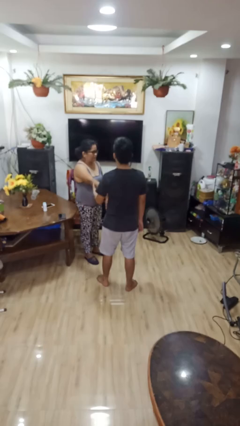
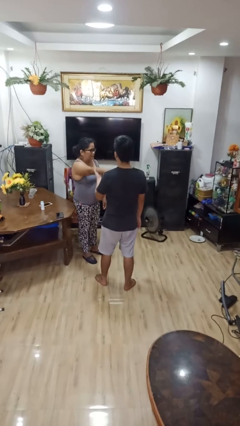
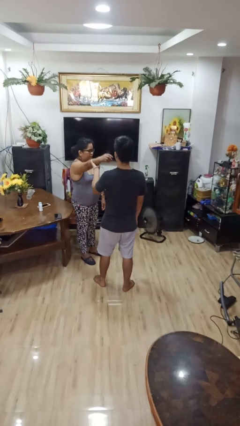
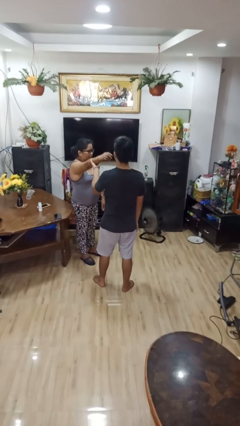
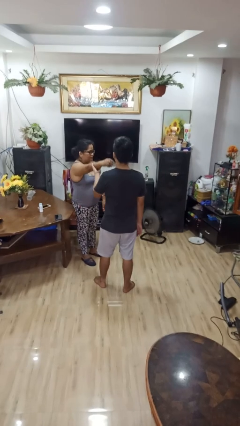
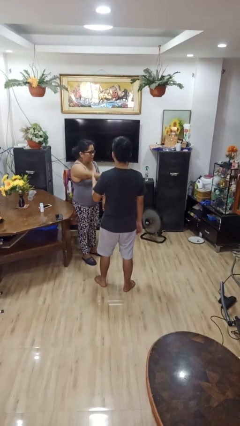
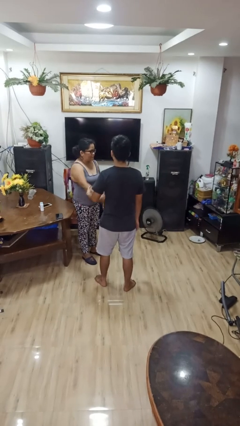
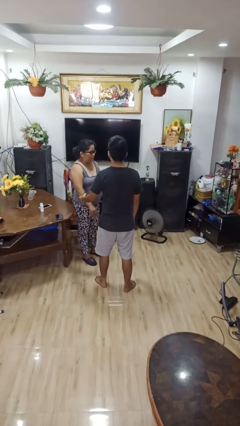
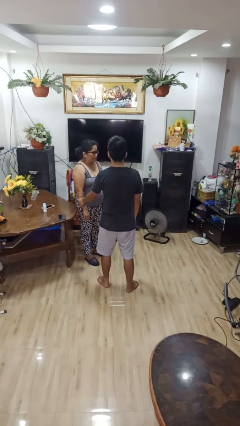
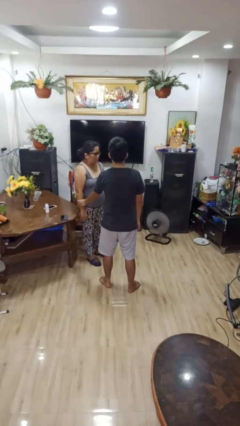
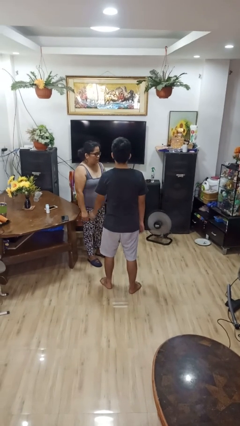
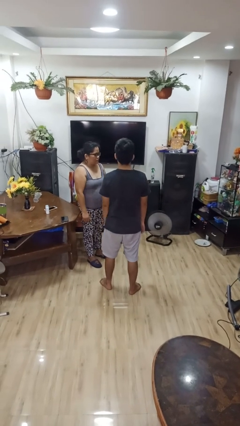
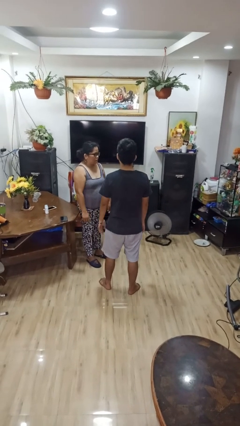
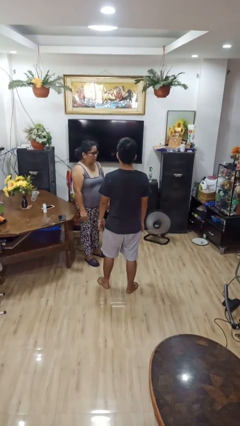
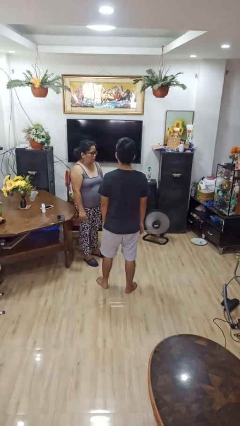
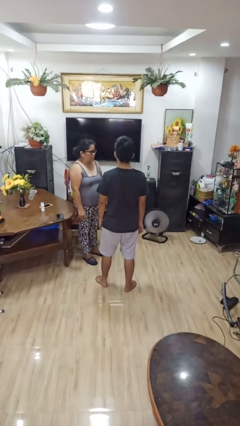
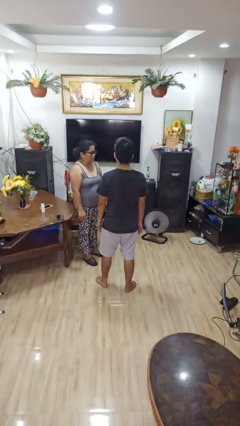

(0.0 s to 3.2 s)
person grabs person by forearm

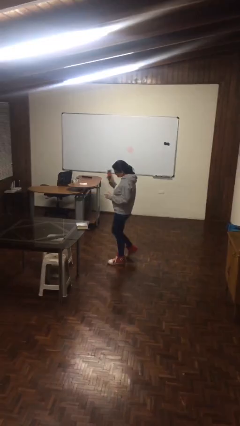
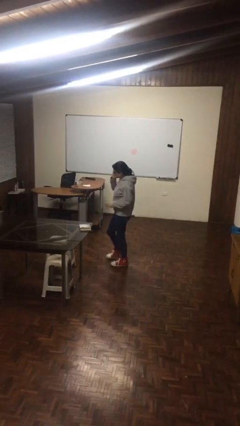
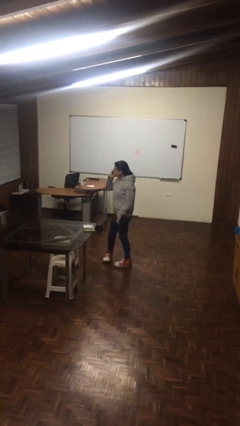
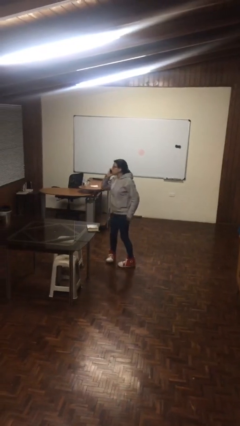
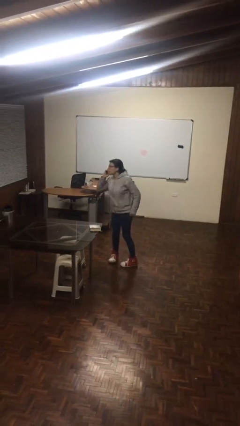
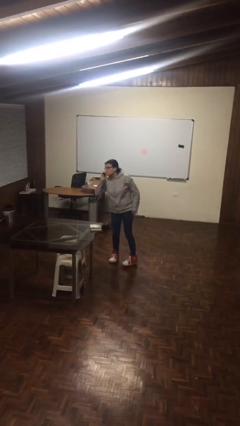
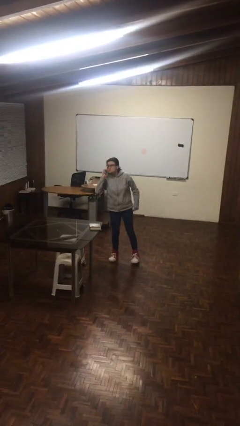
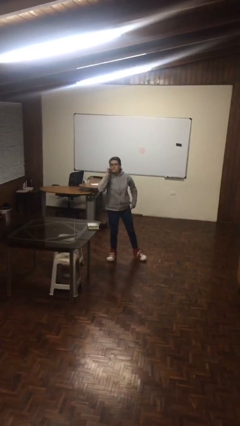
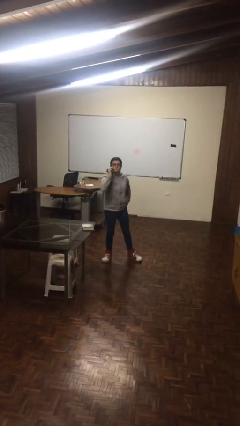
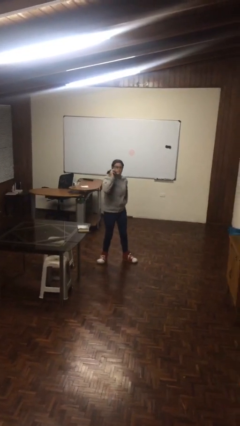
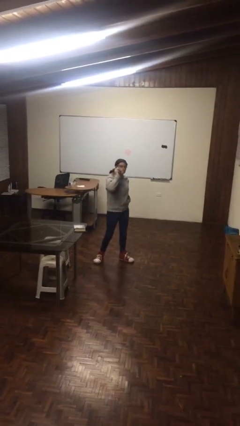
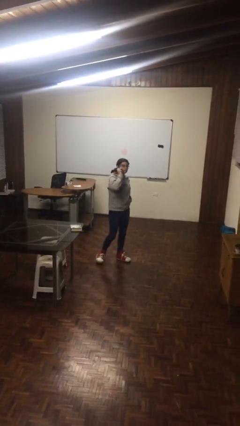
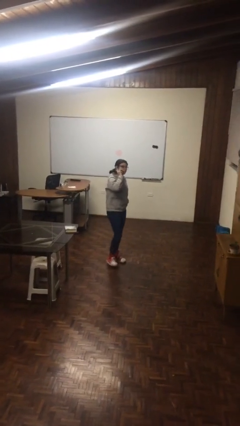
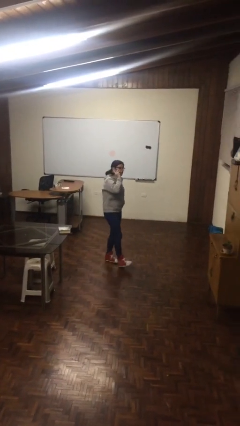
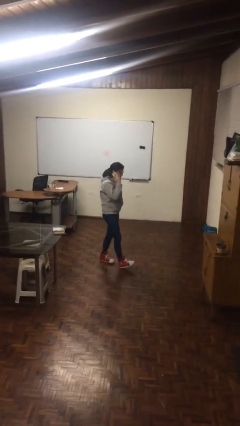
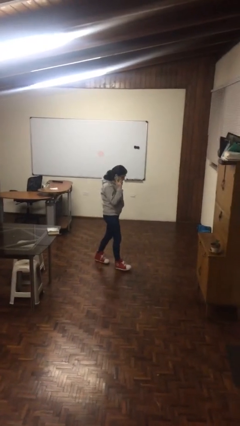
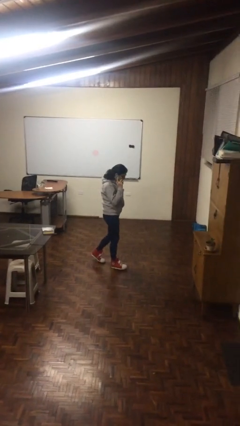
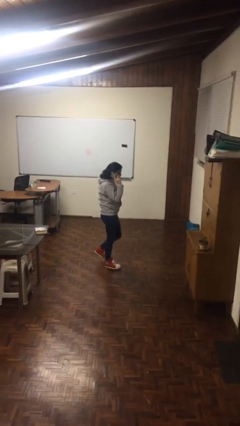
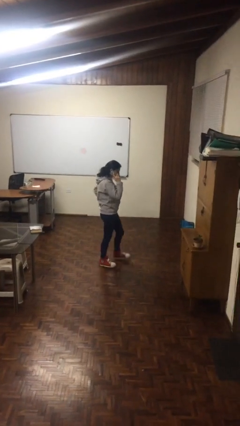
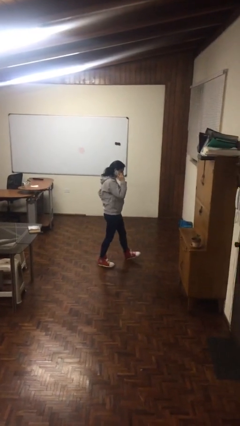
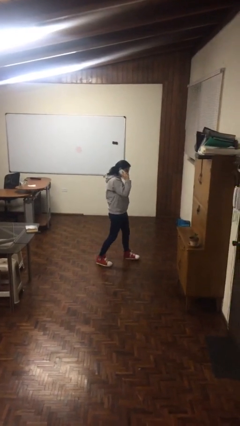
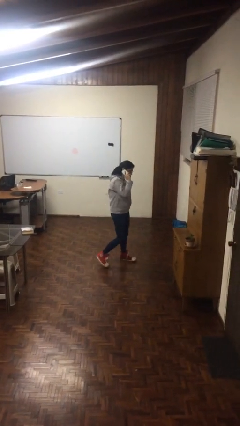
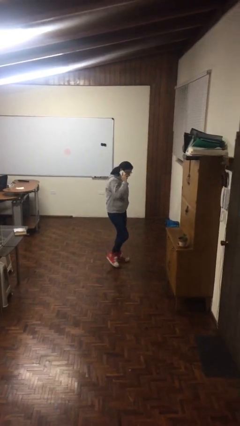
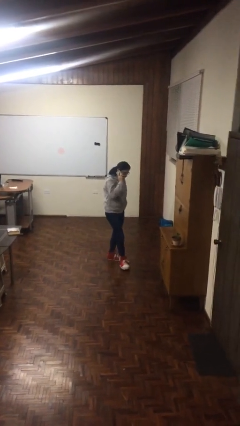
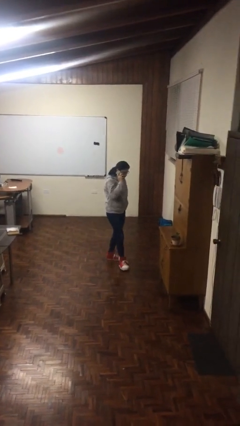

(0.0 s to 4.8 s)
person talks on phone

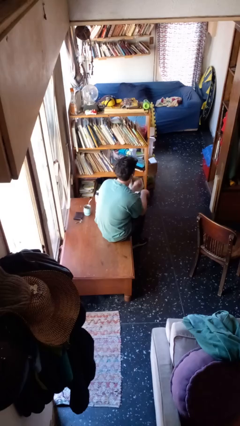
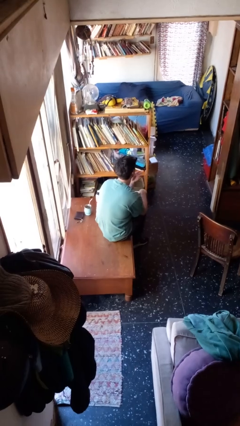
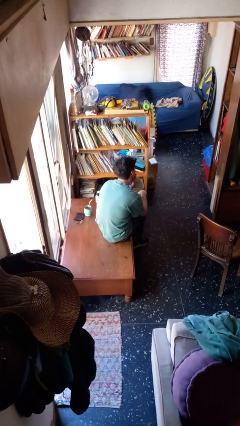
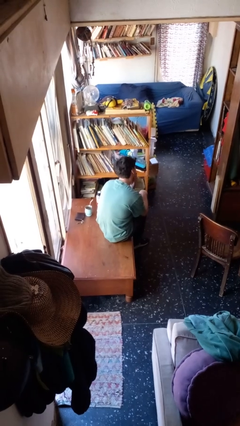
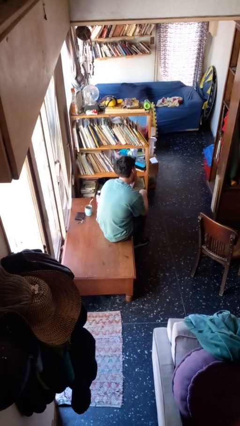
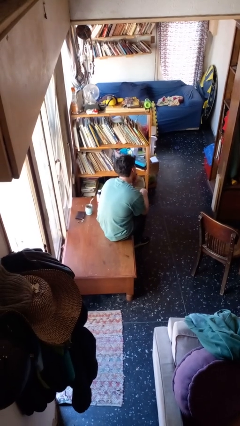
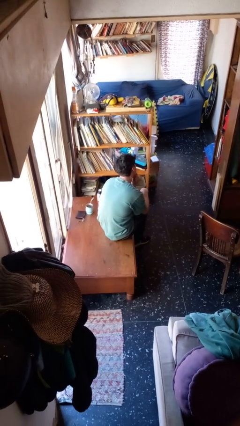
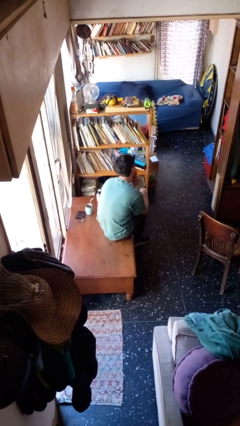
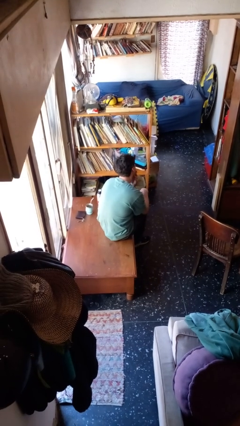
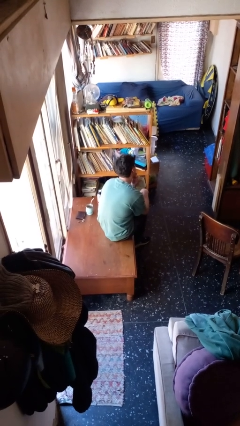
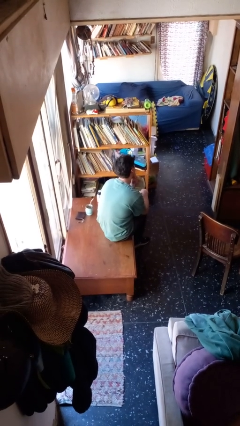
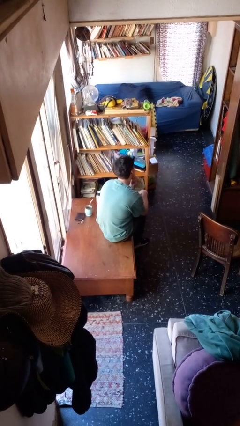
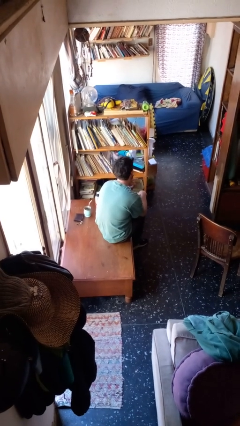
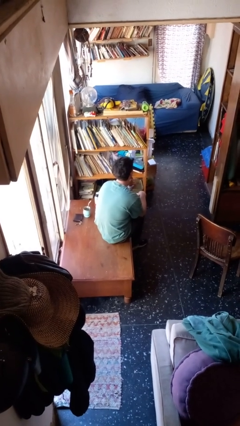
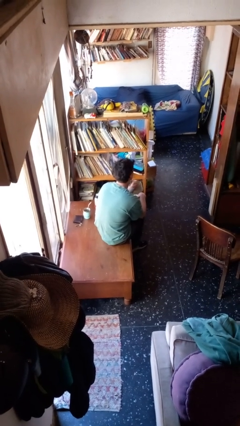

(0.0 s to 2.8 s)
person strokes chin

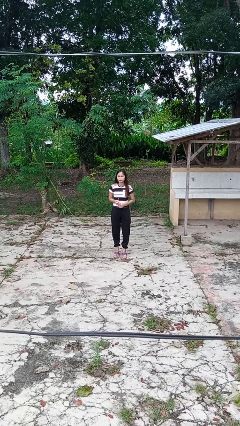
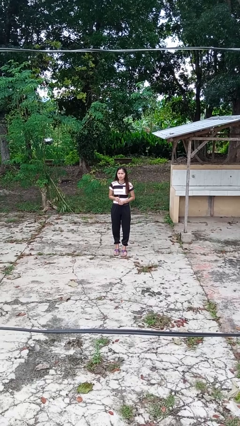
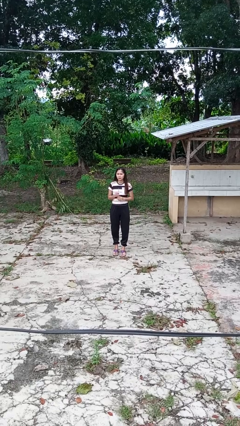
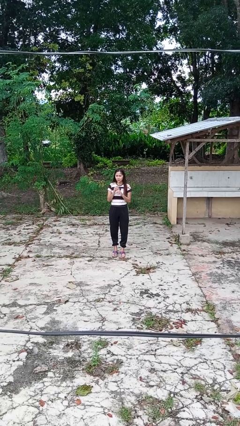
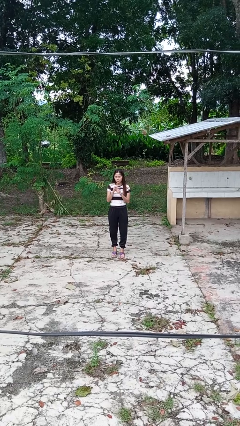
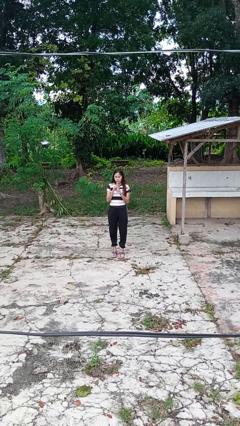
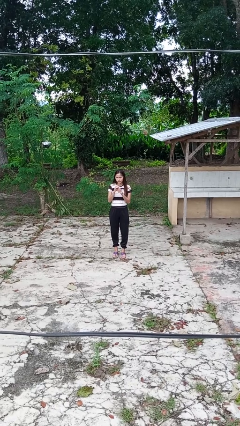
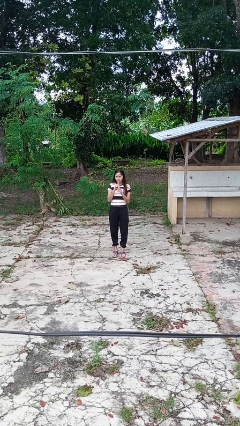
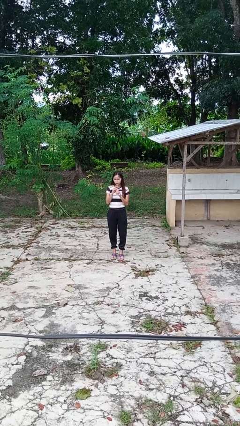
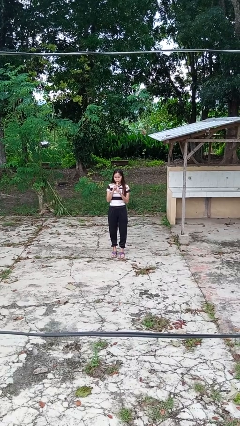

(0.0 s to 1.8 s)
person drinks from straw

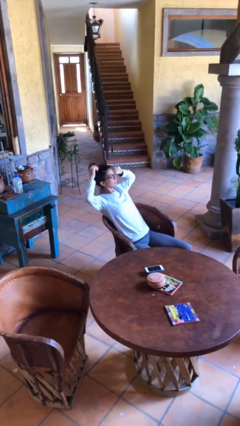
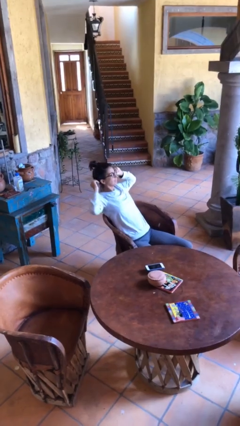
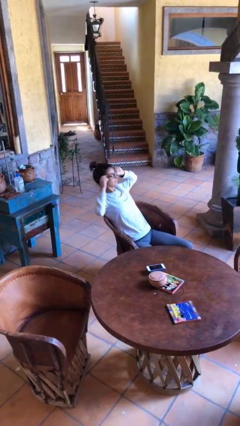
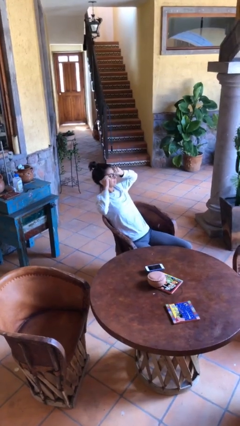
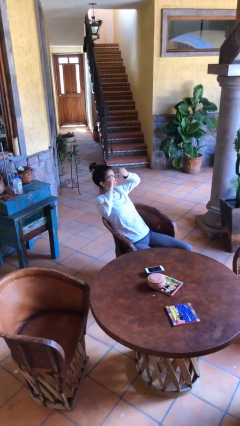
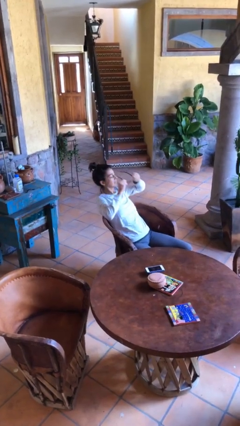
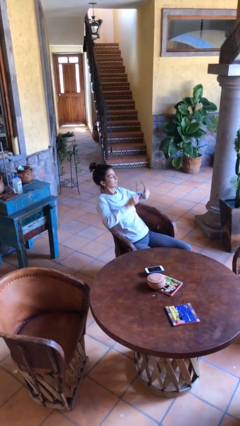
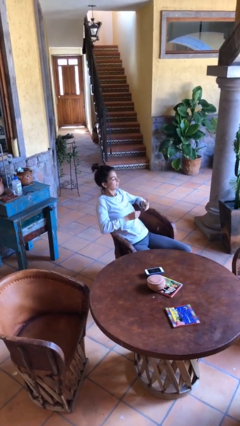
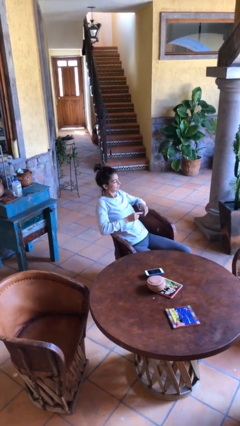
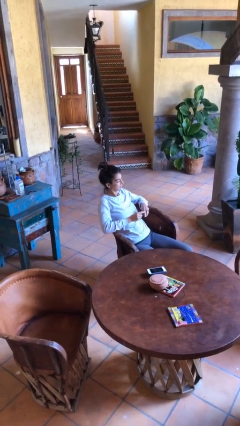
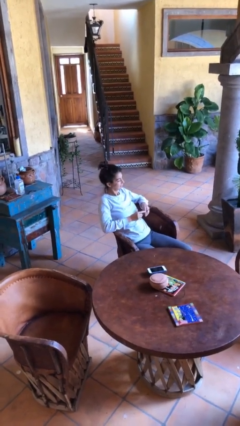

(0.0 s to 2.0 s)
person takes off glasses

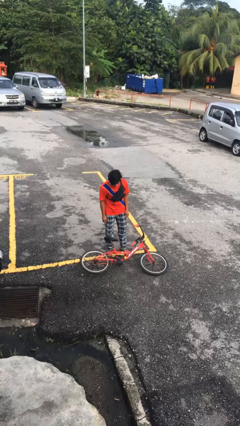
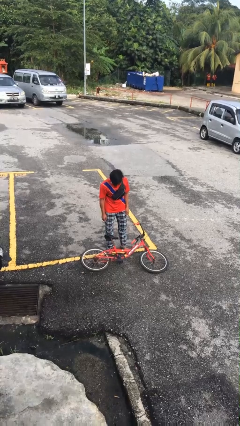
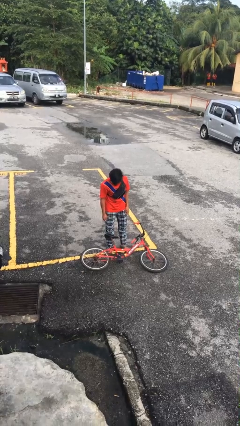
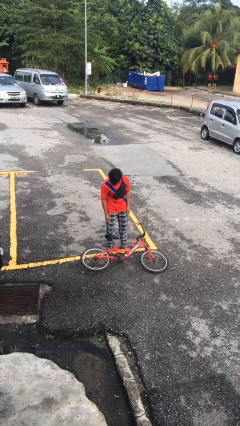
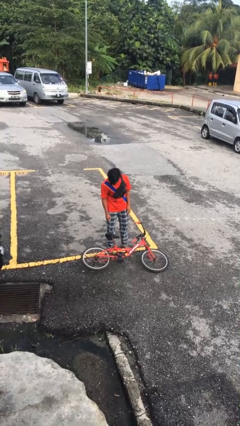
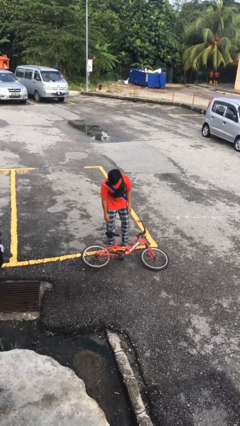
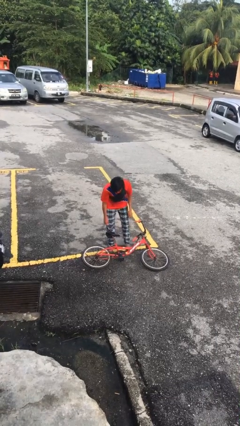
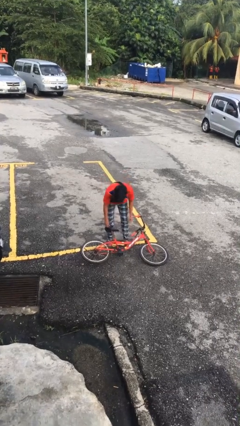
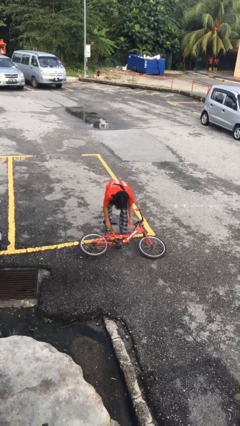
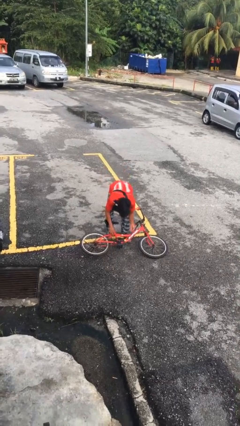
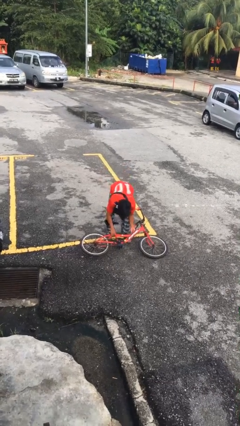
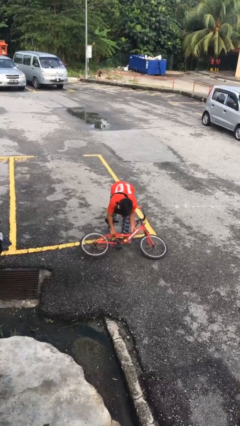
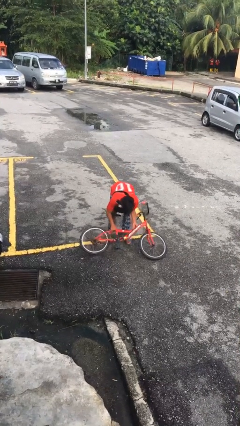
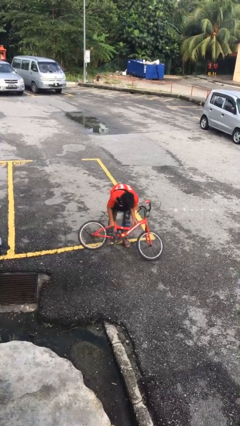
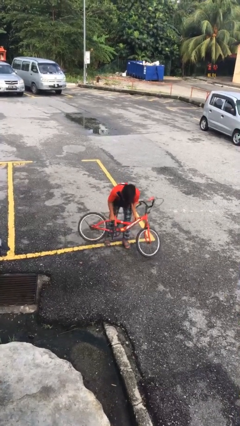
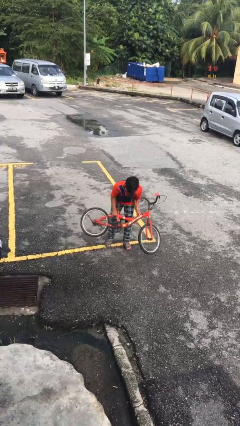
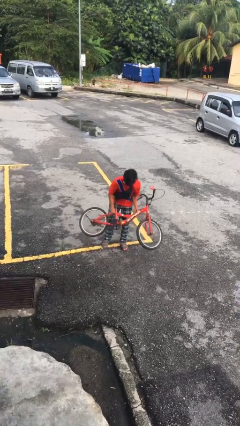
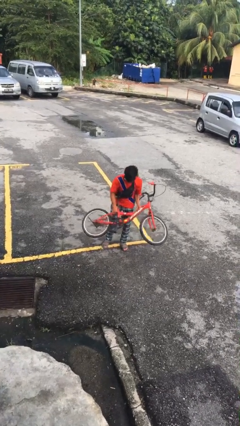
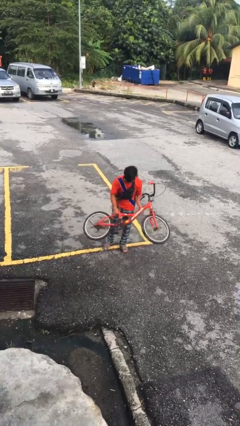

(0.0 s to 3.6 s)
person picks up object from floor
